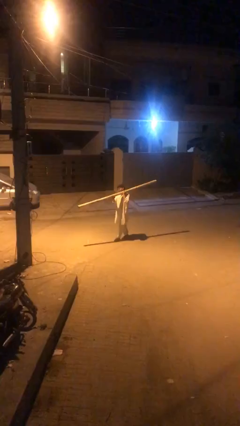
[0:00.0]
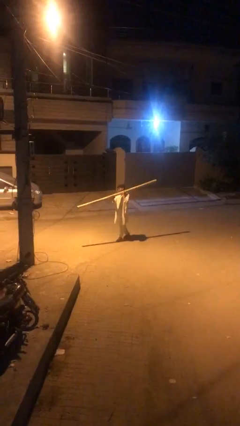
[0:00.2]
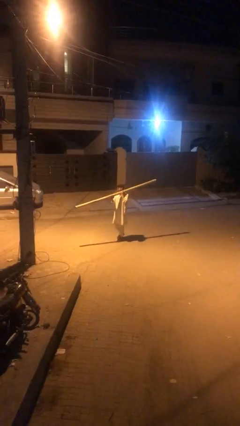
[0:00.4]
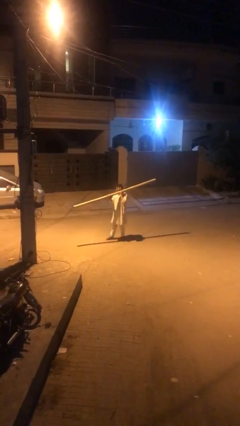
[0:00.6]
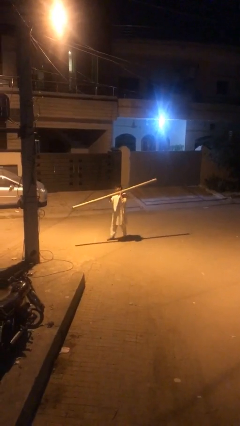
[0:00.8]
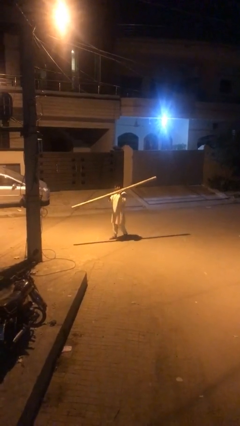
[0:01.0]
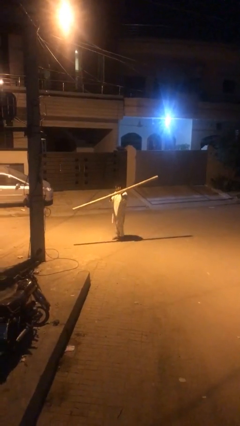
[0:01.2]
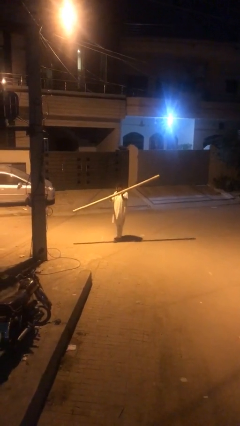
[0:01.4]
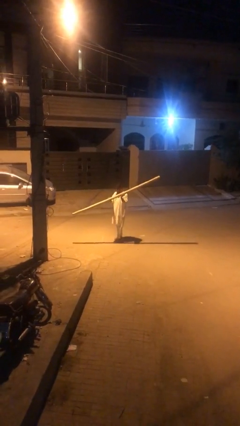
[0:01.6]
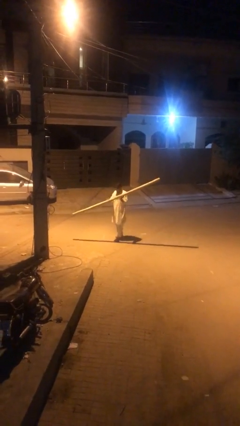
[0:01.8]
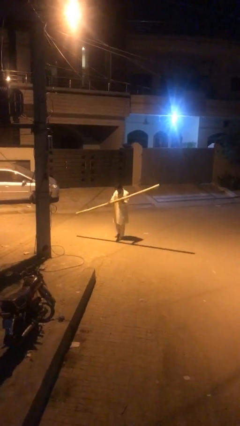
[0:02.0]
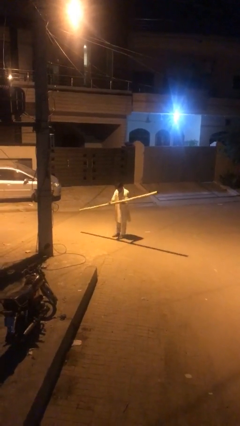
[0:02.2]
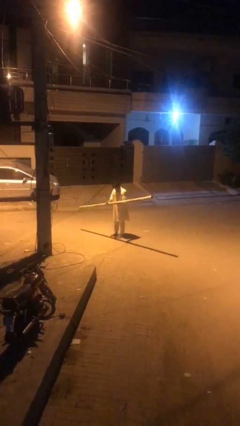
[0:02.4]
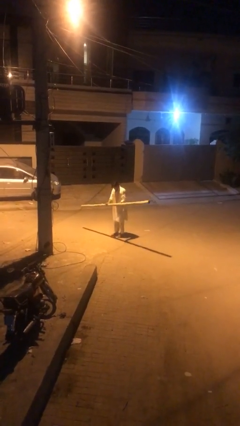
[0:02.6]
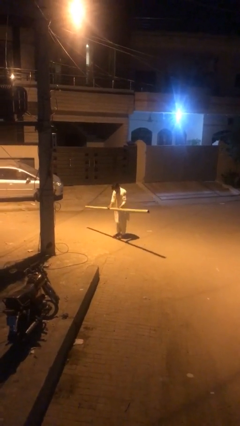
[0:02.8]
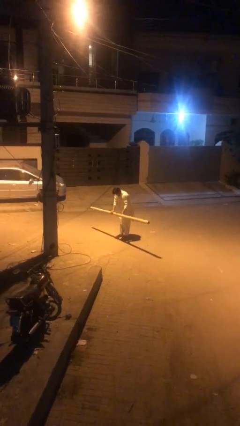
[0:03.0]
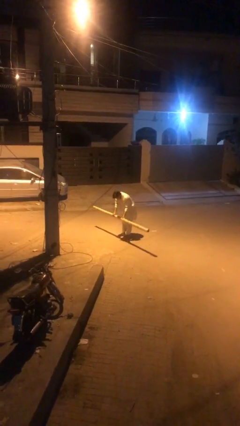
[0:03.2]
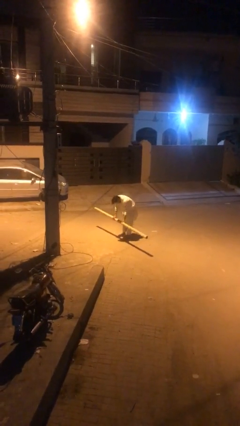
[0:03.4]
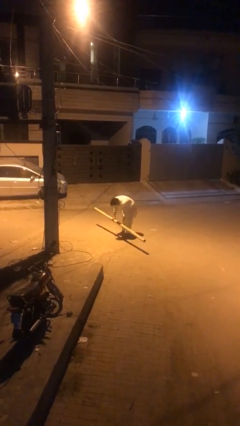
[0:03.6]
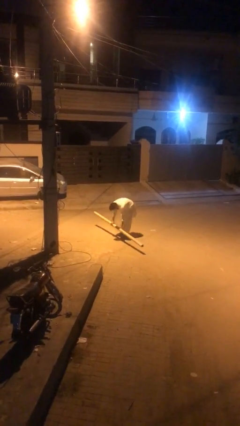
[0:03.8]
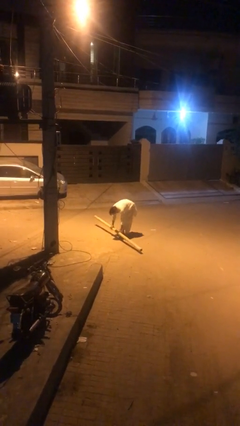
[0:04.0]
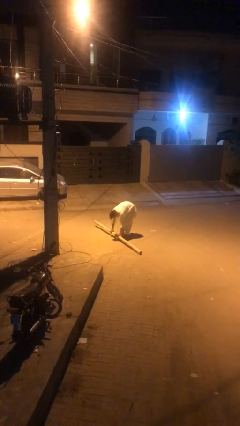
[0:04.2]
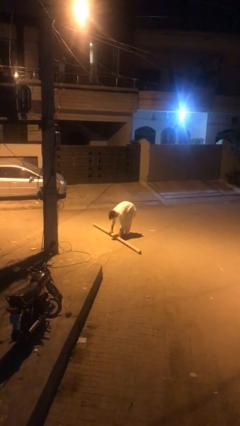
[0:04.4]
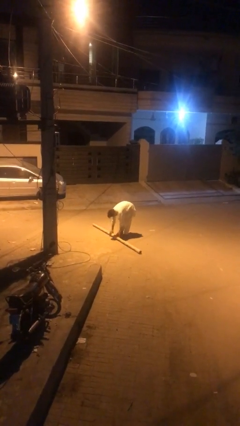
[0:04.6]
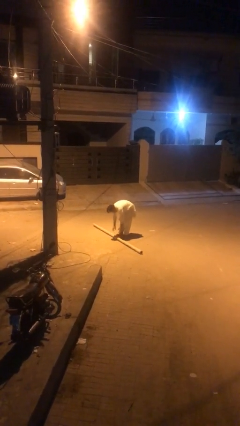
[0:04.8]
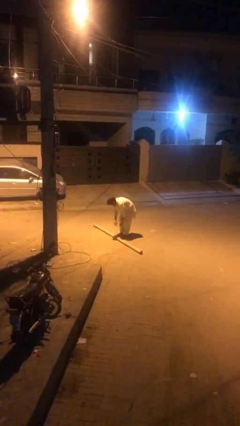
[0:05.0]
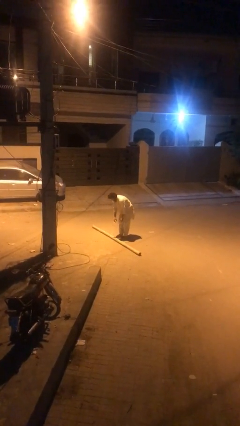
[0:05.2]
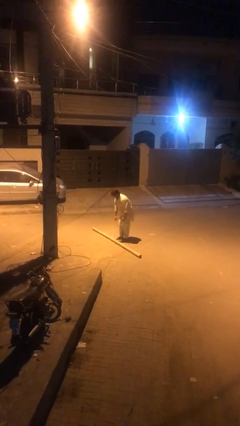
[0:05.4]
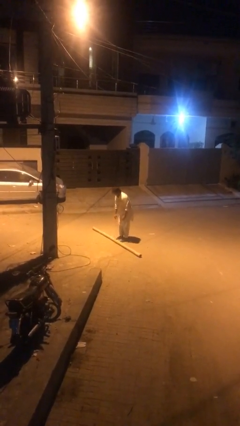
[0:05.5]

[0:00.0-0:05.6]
person puts down object on floor

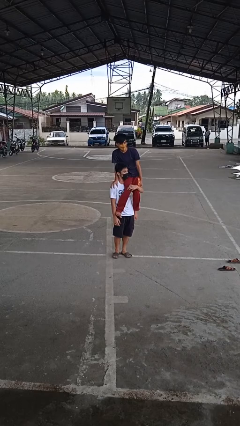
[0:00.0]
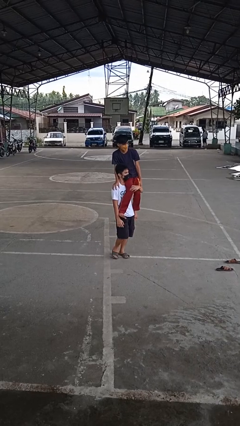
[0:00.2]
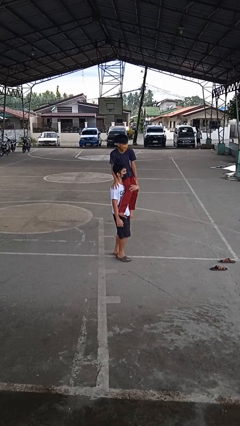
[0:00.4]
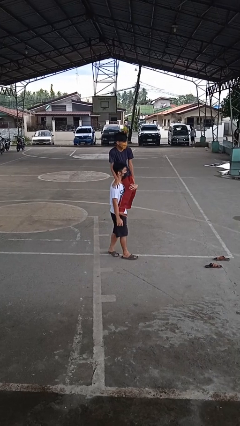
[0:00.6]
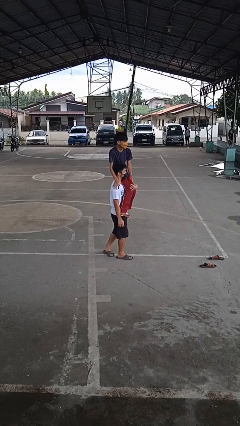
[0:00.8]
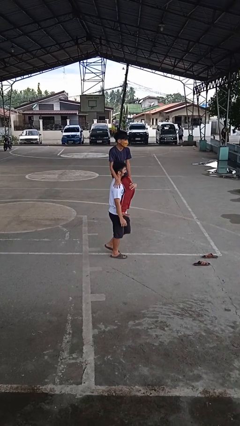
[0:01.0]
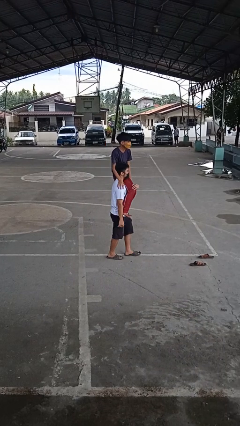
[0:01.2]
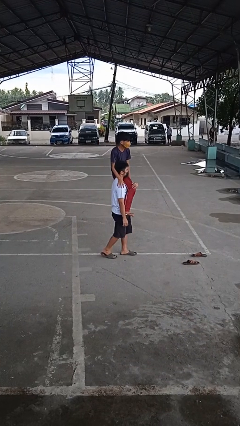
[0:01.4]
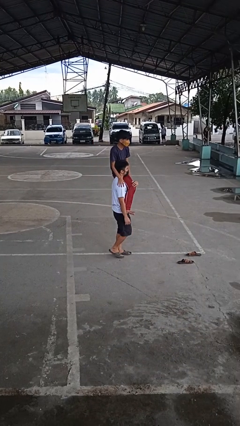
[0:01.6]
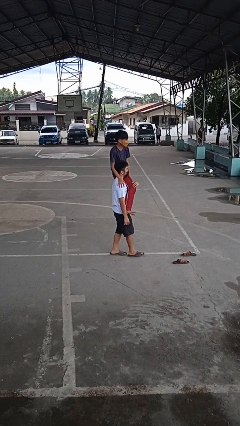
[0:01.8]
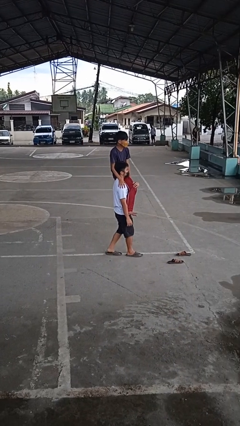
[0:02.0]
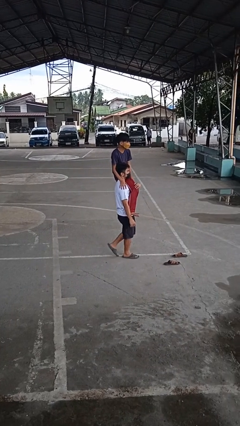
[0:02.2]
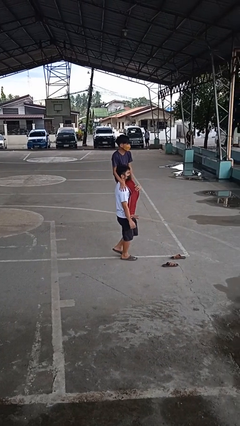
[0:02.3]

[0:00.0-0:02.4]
person carries person on shoulders

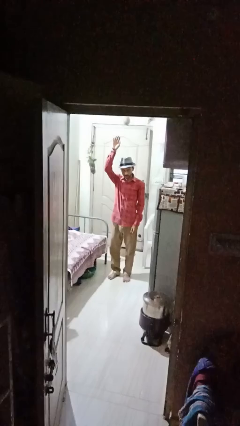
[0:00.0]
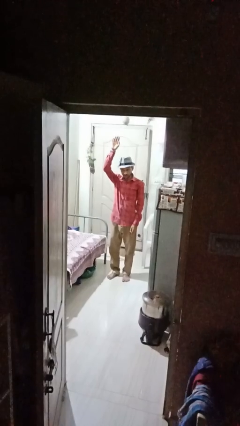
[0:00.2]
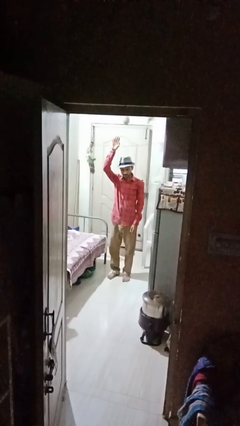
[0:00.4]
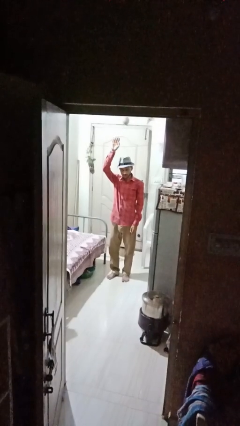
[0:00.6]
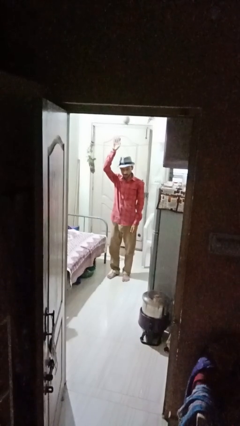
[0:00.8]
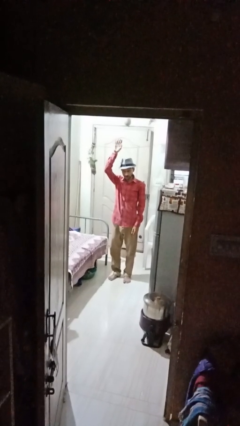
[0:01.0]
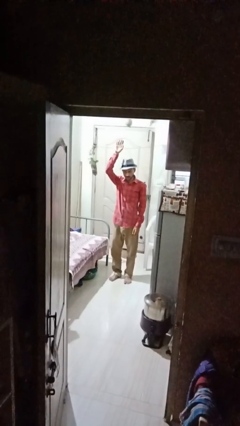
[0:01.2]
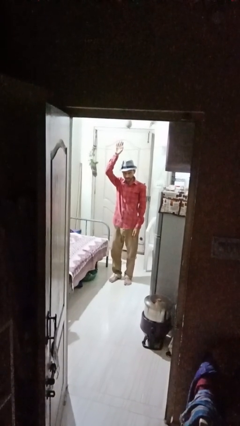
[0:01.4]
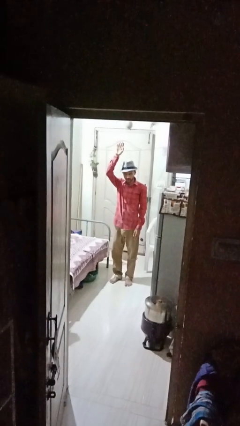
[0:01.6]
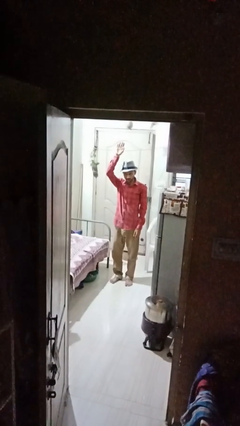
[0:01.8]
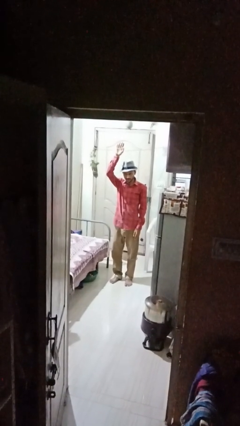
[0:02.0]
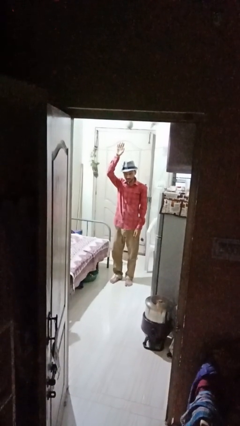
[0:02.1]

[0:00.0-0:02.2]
person gestures raise hand

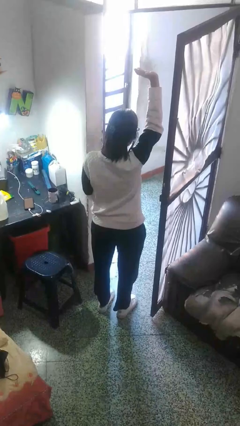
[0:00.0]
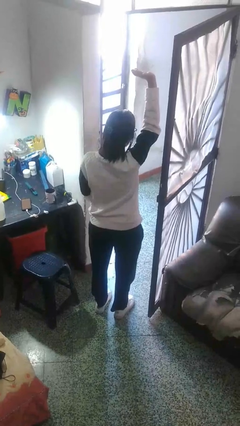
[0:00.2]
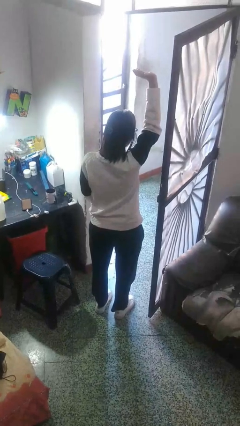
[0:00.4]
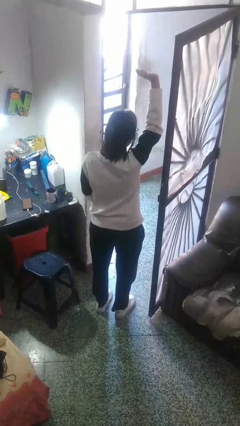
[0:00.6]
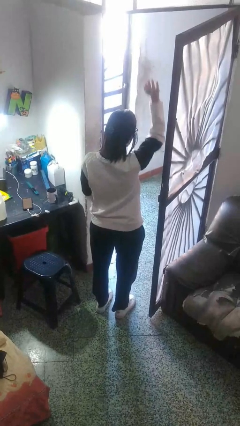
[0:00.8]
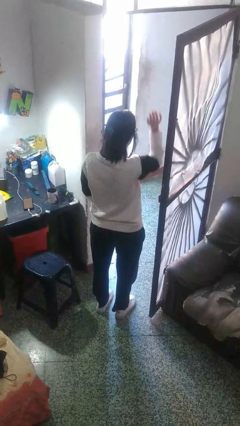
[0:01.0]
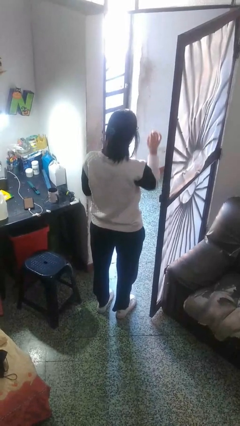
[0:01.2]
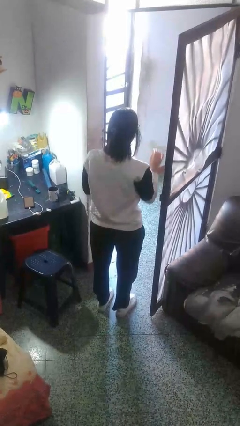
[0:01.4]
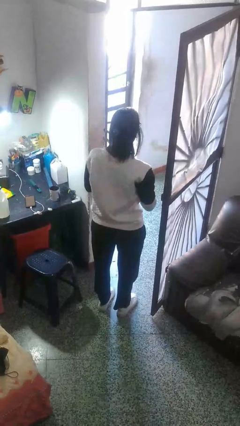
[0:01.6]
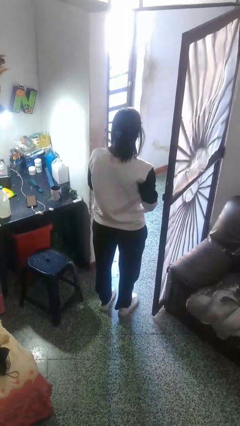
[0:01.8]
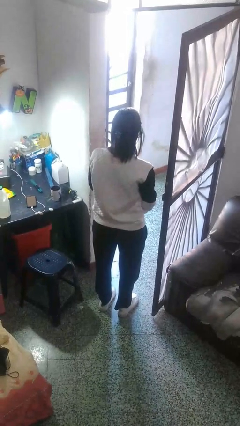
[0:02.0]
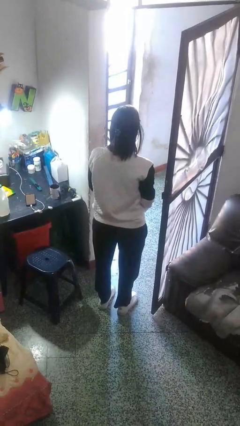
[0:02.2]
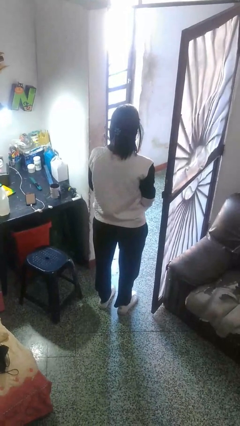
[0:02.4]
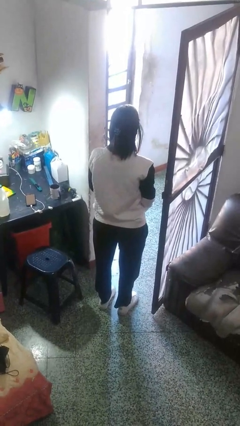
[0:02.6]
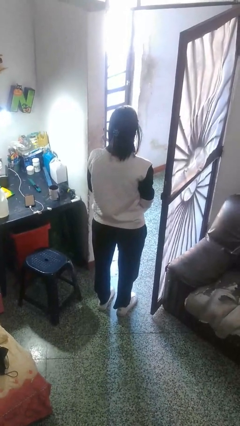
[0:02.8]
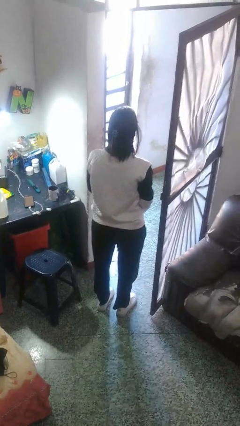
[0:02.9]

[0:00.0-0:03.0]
person gestures lower hand

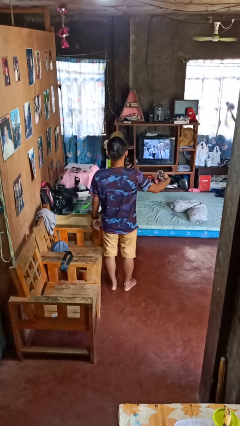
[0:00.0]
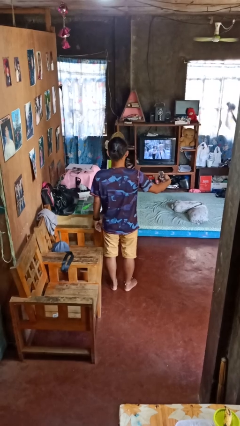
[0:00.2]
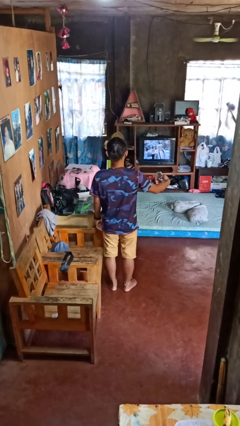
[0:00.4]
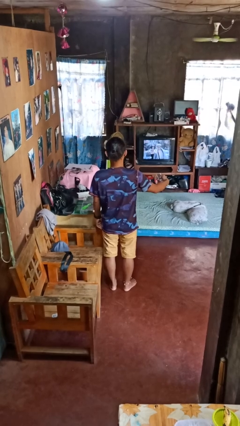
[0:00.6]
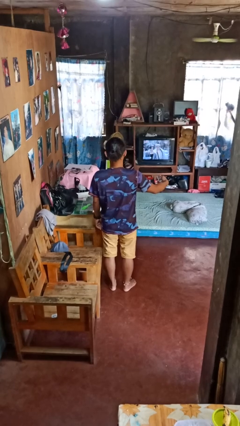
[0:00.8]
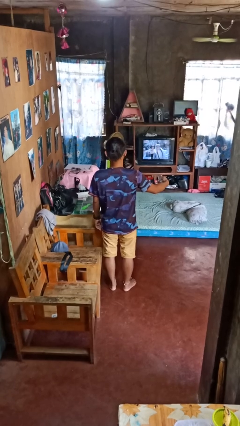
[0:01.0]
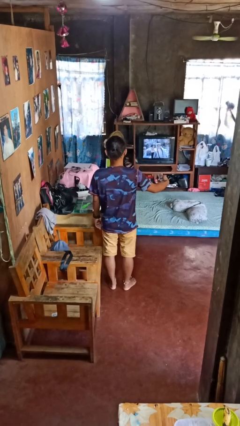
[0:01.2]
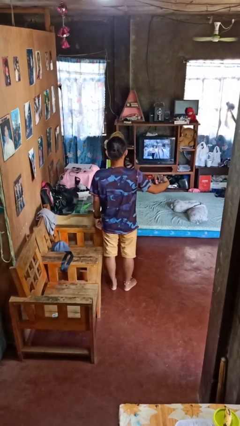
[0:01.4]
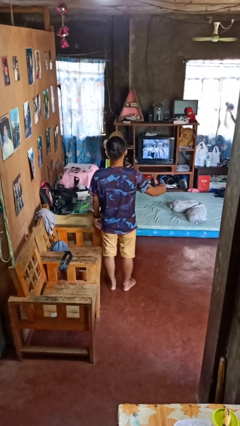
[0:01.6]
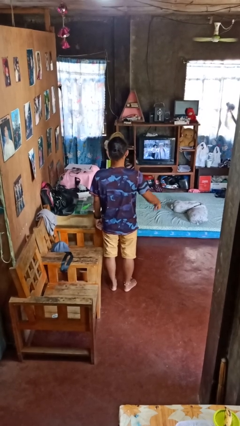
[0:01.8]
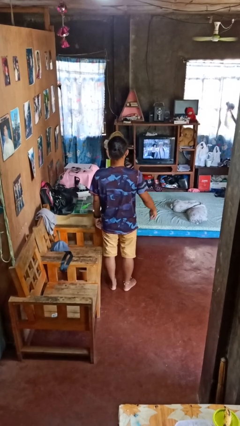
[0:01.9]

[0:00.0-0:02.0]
person uses television remote

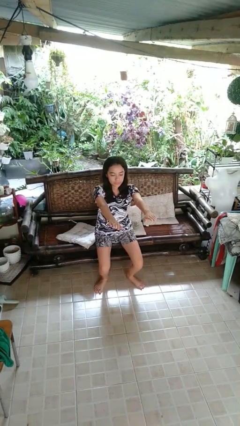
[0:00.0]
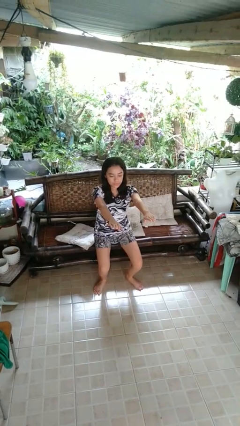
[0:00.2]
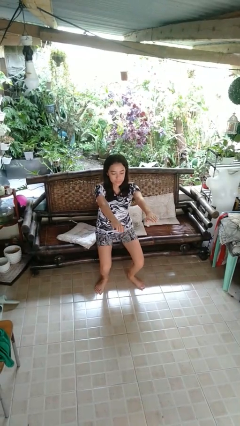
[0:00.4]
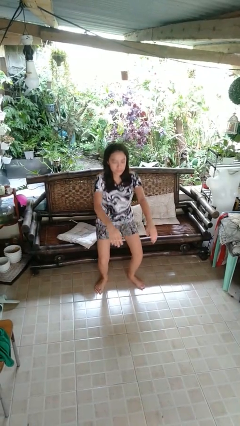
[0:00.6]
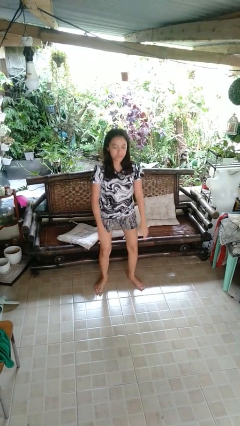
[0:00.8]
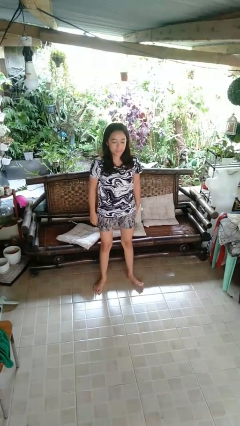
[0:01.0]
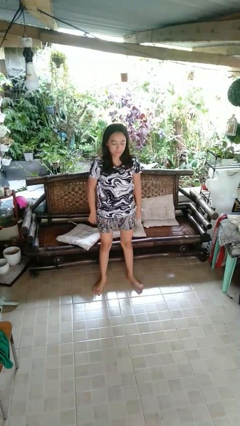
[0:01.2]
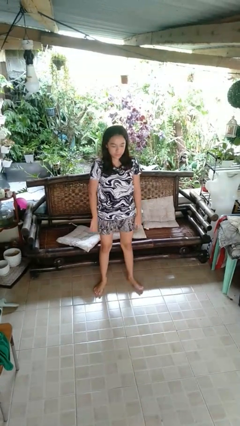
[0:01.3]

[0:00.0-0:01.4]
person stands up

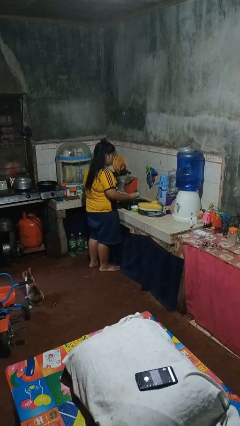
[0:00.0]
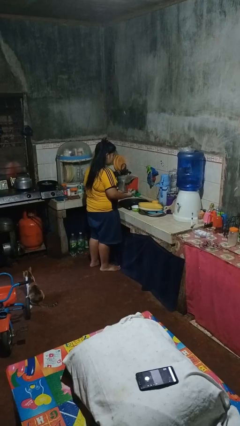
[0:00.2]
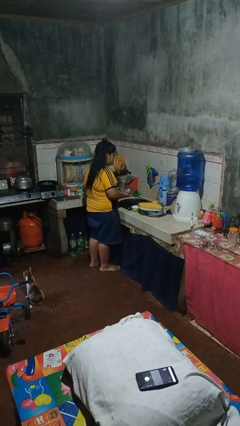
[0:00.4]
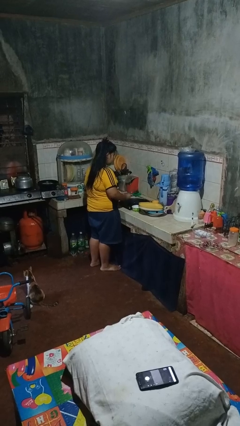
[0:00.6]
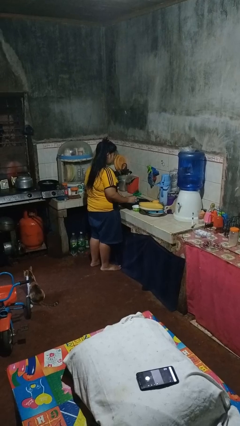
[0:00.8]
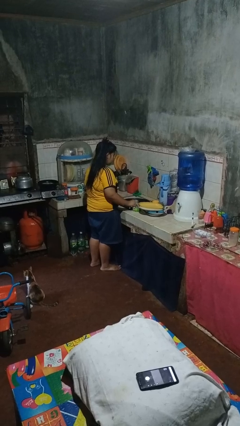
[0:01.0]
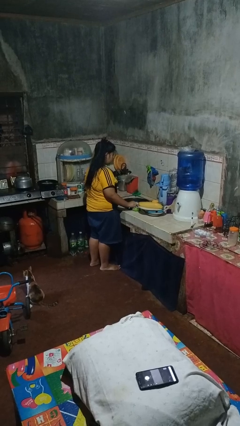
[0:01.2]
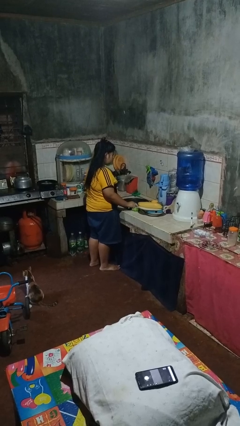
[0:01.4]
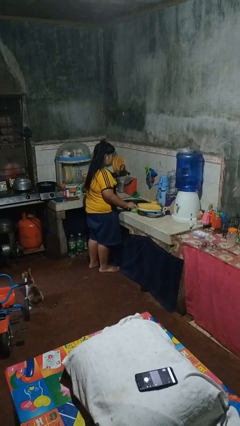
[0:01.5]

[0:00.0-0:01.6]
person washes dish
